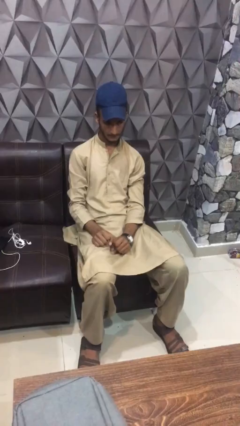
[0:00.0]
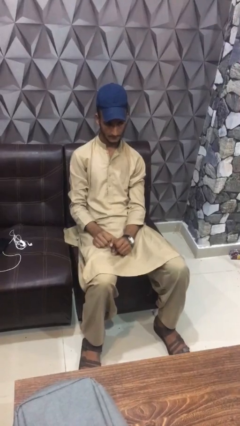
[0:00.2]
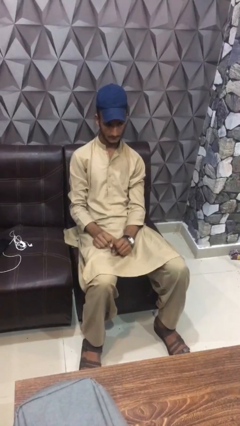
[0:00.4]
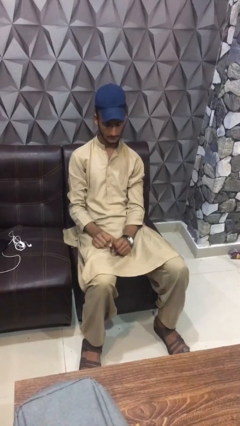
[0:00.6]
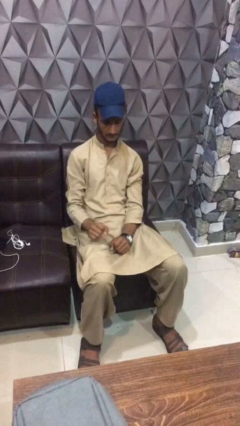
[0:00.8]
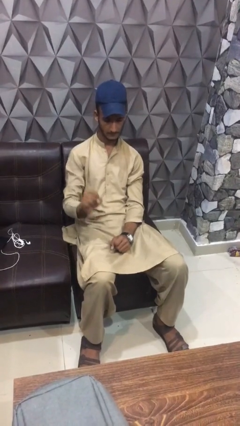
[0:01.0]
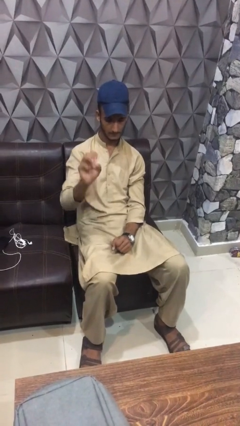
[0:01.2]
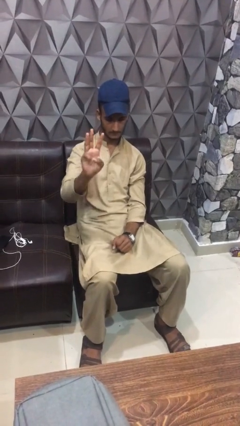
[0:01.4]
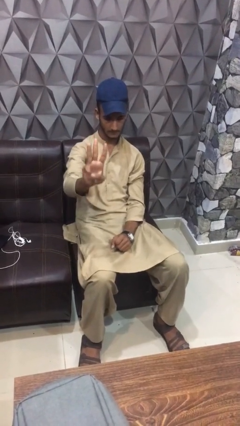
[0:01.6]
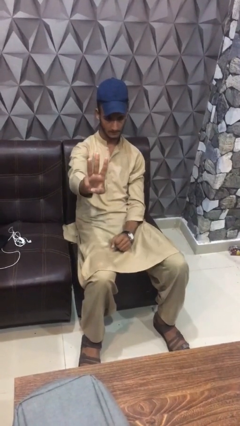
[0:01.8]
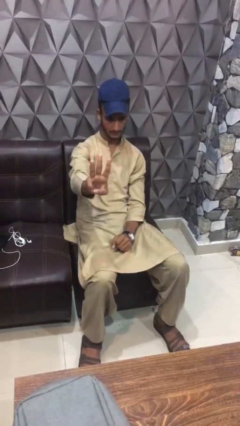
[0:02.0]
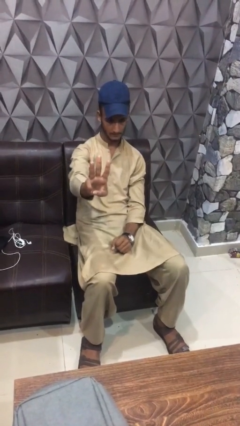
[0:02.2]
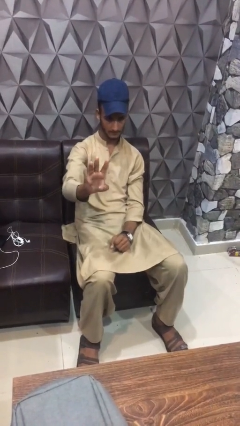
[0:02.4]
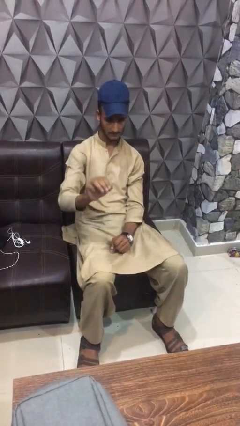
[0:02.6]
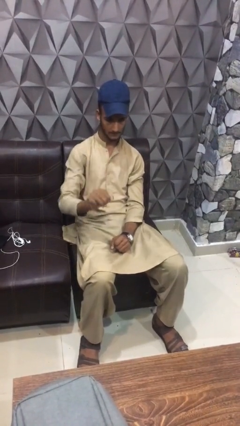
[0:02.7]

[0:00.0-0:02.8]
person gestures number three

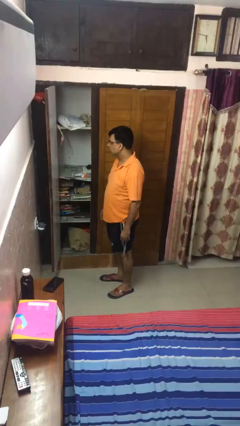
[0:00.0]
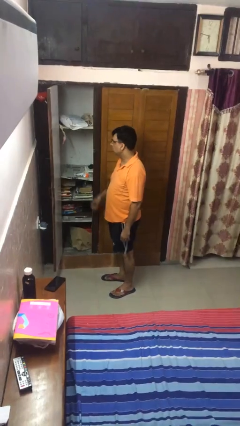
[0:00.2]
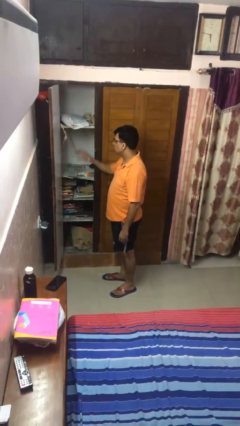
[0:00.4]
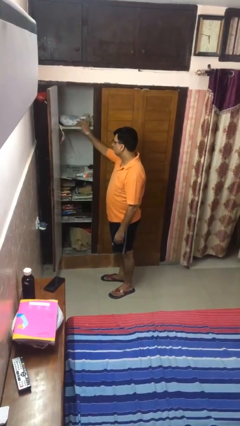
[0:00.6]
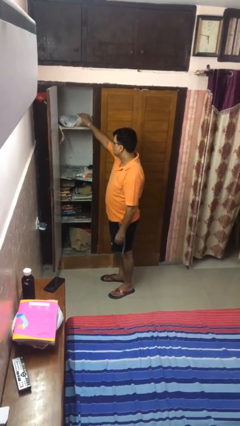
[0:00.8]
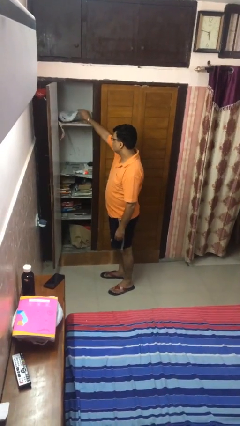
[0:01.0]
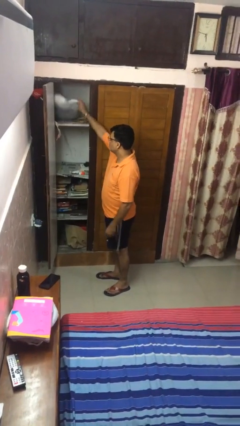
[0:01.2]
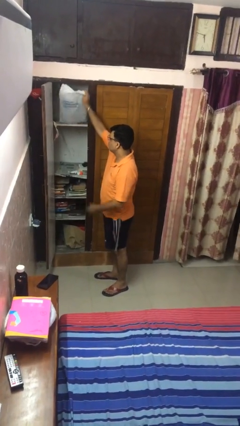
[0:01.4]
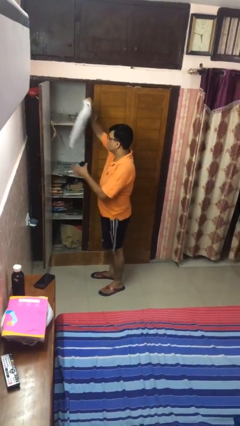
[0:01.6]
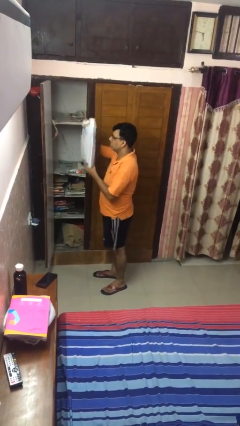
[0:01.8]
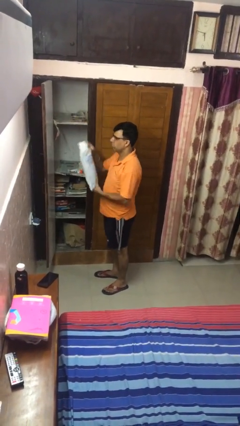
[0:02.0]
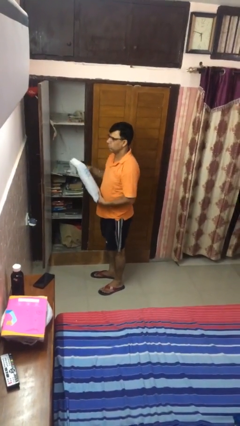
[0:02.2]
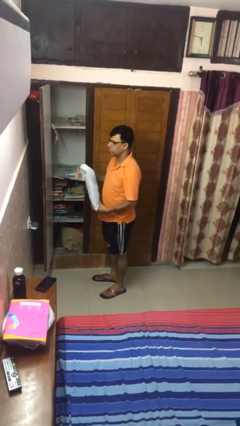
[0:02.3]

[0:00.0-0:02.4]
person picks up object from shelf

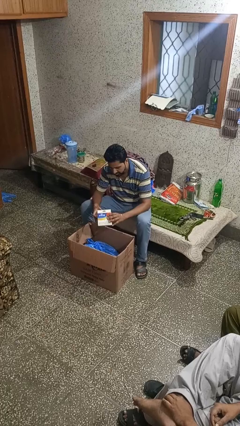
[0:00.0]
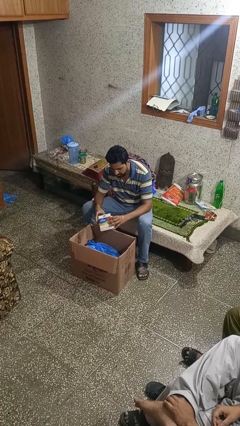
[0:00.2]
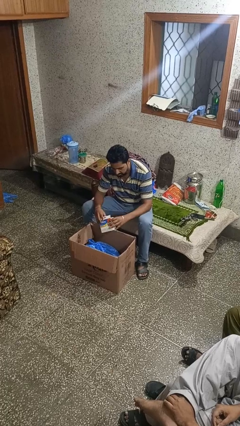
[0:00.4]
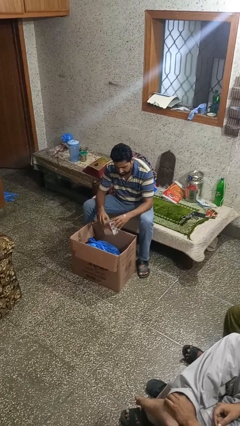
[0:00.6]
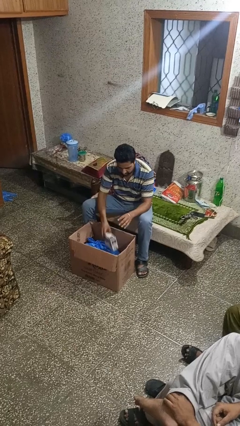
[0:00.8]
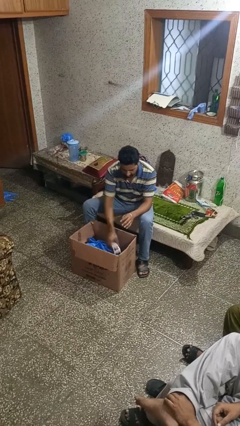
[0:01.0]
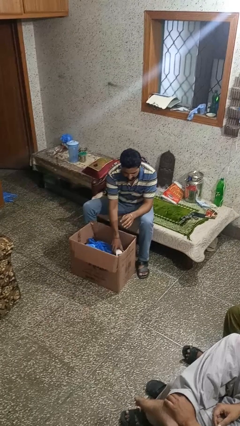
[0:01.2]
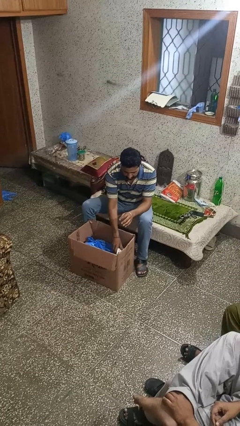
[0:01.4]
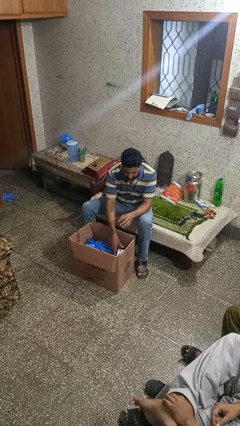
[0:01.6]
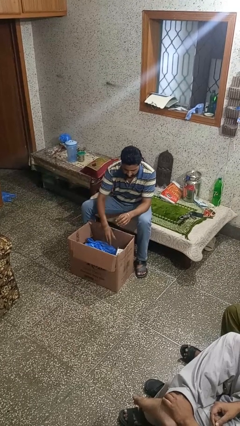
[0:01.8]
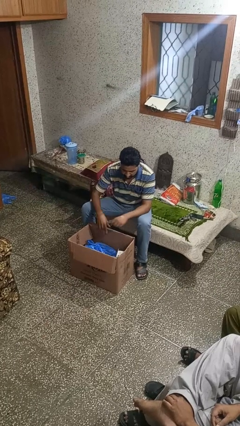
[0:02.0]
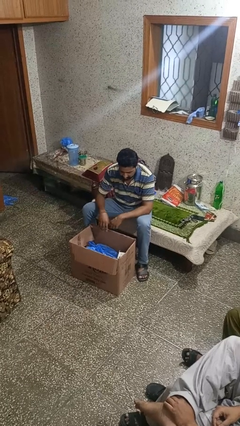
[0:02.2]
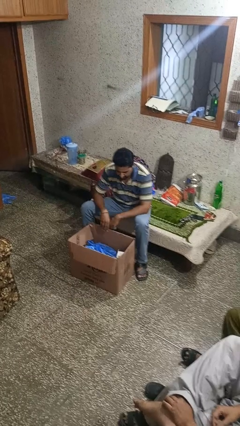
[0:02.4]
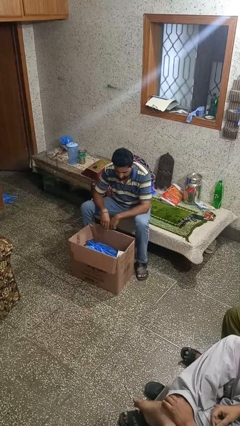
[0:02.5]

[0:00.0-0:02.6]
person puts object into box

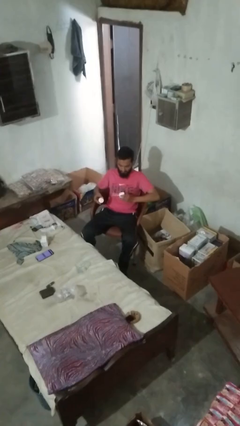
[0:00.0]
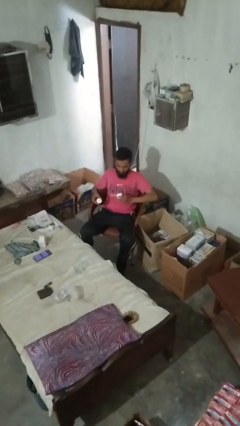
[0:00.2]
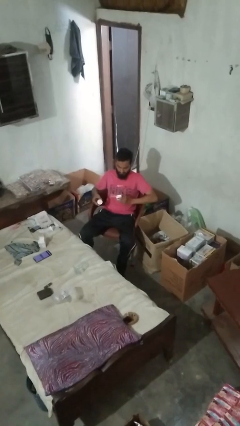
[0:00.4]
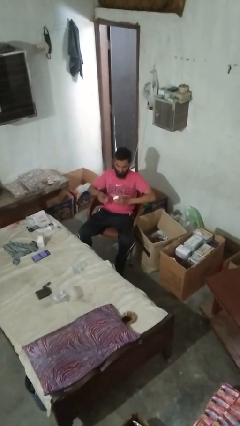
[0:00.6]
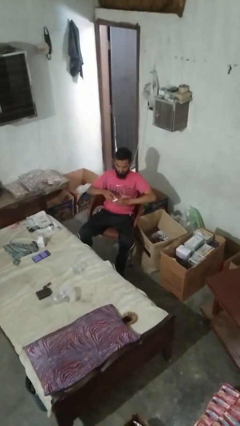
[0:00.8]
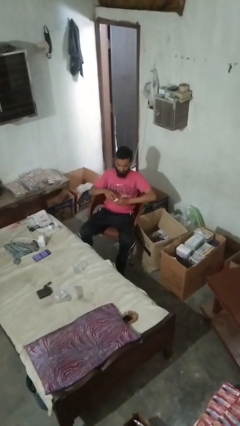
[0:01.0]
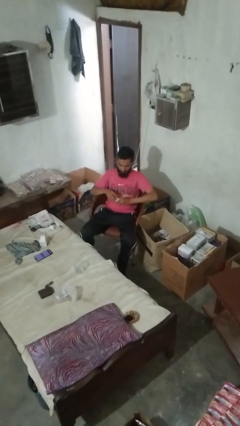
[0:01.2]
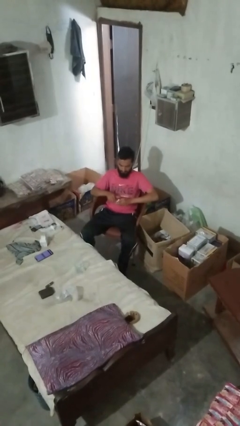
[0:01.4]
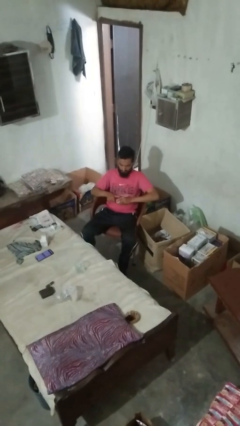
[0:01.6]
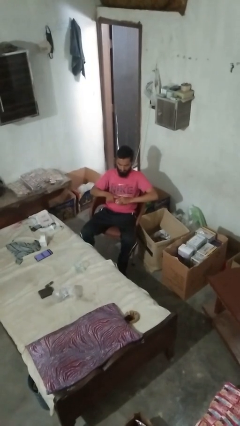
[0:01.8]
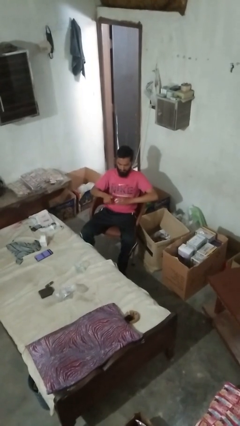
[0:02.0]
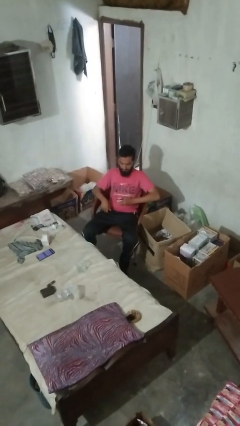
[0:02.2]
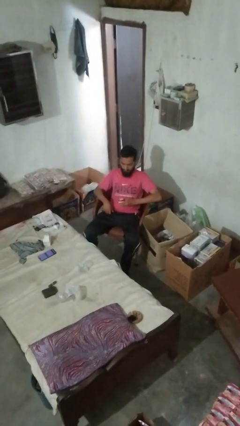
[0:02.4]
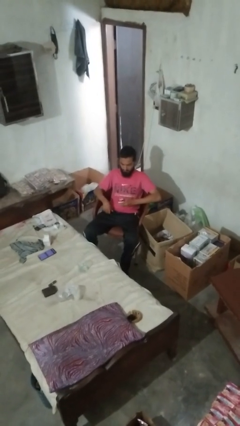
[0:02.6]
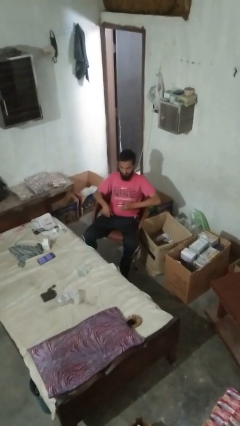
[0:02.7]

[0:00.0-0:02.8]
person closes jar

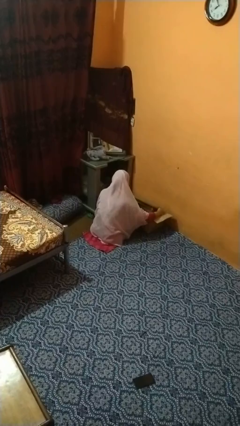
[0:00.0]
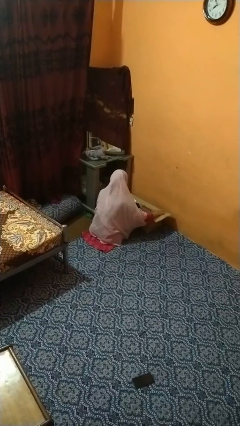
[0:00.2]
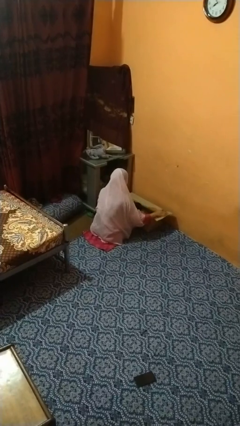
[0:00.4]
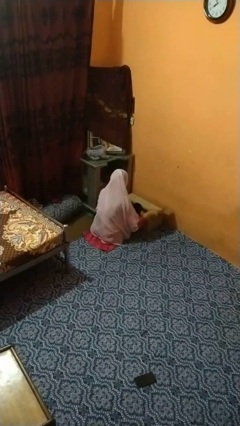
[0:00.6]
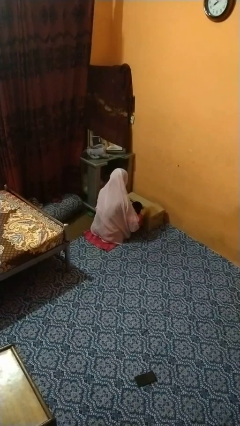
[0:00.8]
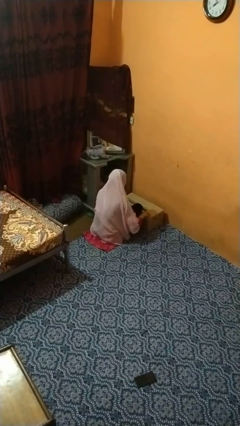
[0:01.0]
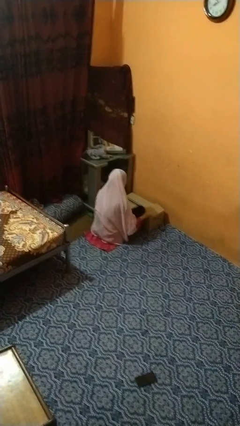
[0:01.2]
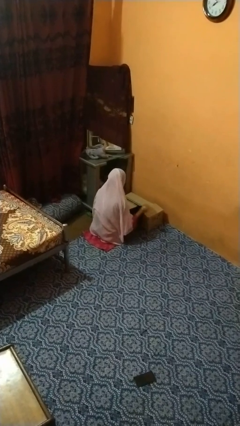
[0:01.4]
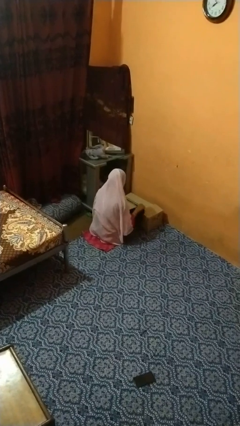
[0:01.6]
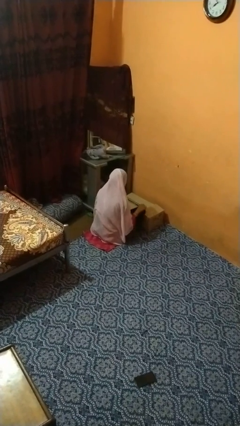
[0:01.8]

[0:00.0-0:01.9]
person closes box

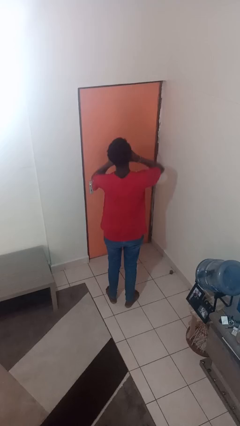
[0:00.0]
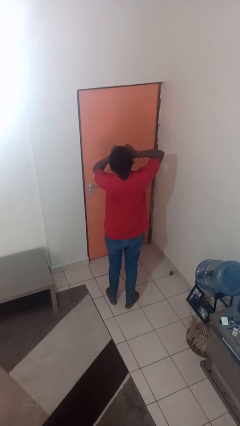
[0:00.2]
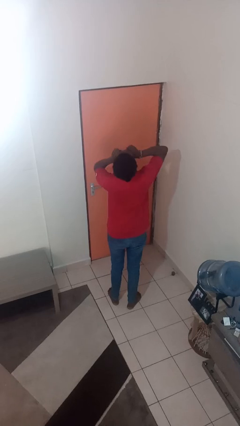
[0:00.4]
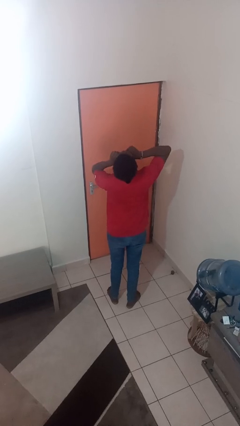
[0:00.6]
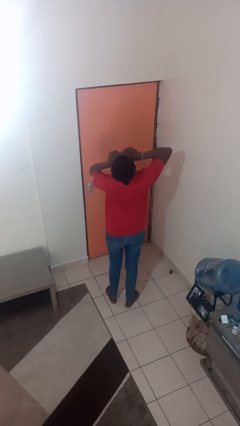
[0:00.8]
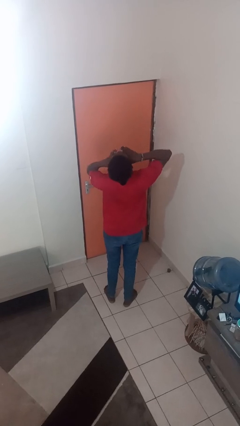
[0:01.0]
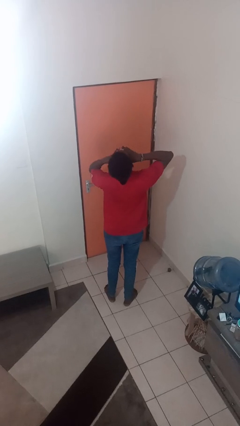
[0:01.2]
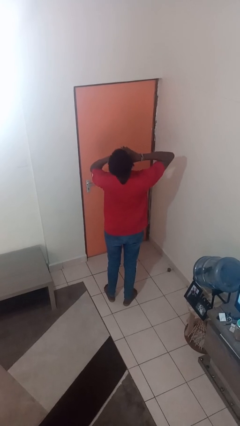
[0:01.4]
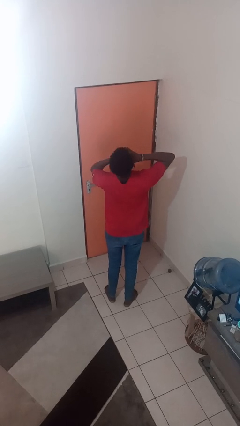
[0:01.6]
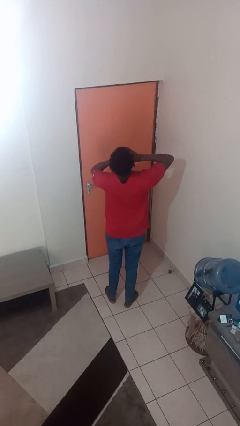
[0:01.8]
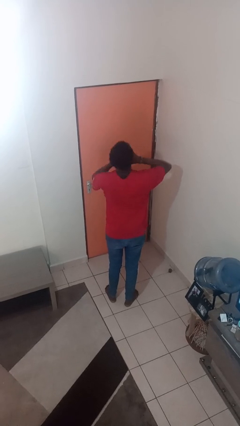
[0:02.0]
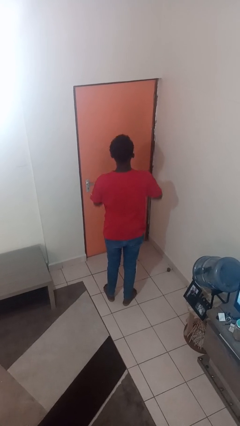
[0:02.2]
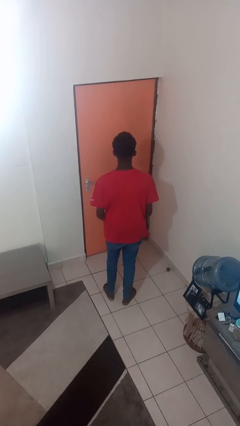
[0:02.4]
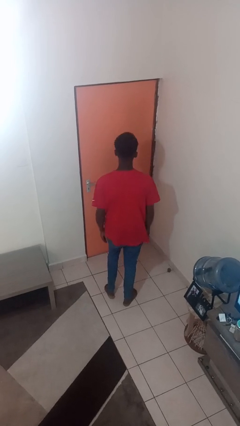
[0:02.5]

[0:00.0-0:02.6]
person yawns

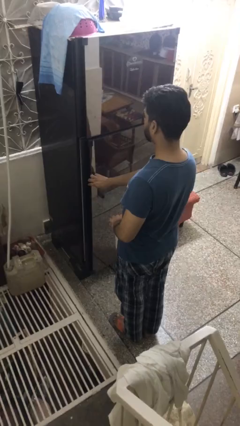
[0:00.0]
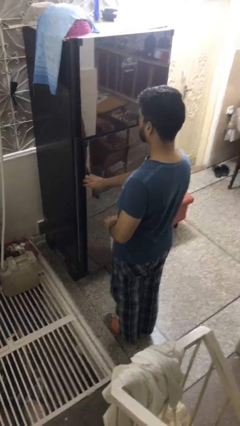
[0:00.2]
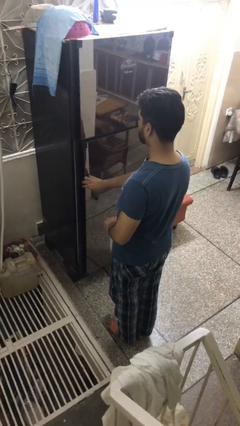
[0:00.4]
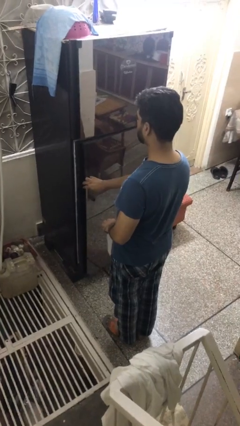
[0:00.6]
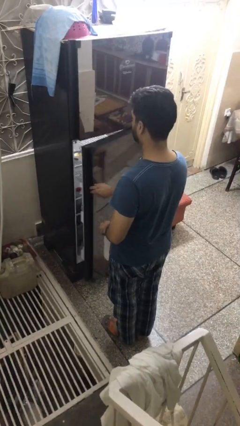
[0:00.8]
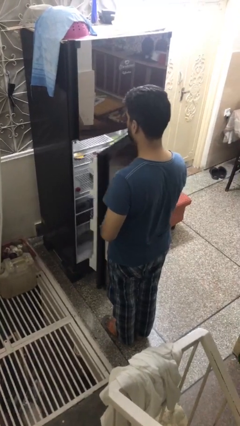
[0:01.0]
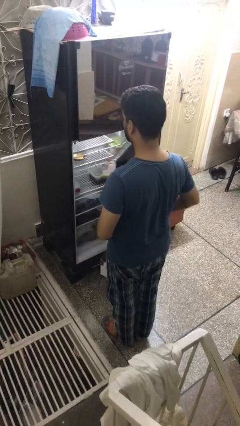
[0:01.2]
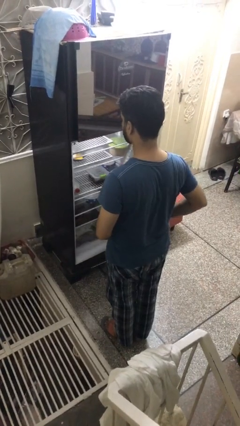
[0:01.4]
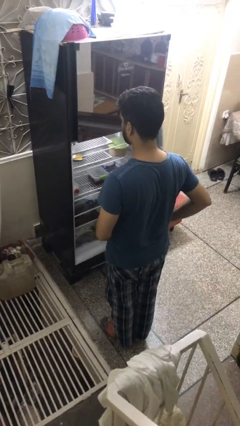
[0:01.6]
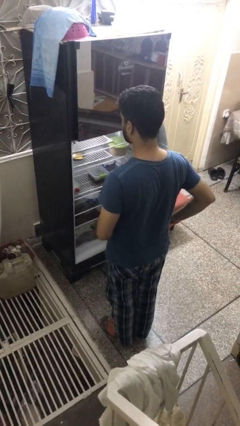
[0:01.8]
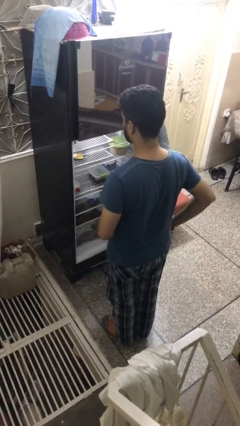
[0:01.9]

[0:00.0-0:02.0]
person opens refrigerator
